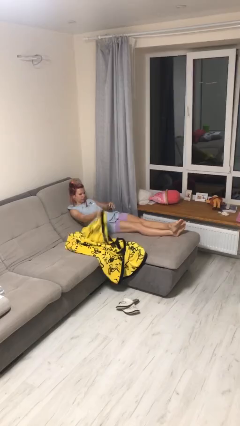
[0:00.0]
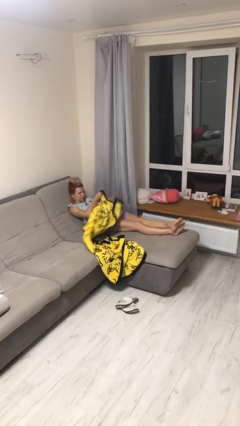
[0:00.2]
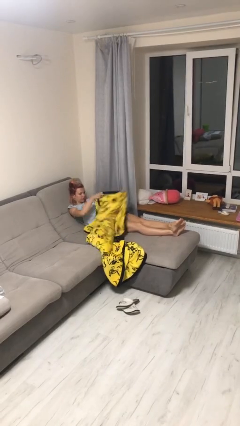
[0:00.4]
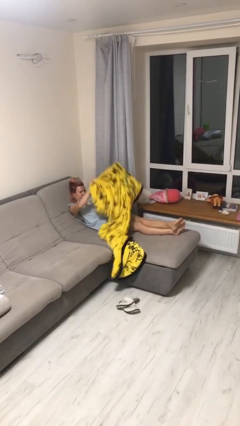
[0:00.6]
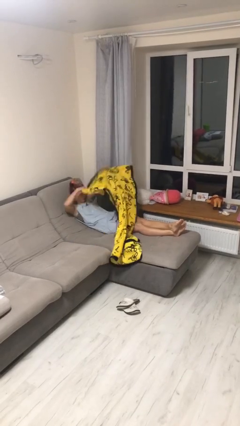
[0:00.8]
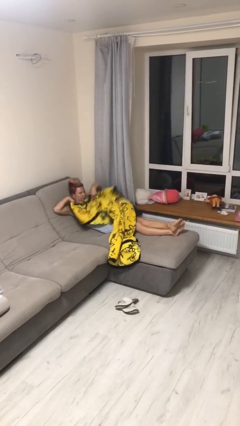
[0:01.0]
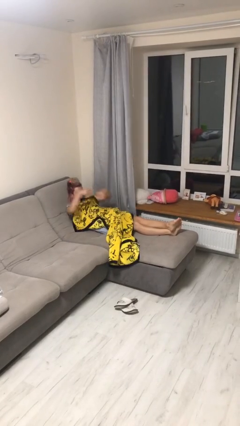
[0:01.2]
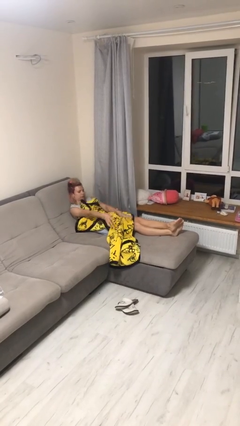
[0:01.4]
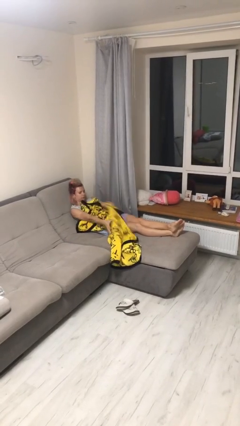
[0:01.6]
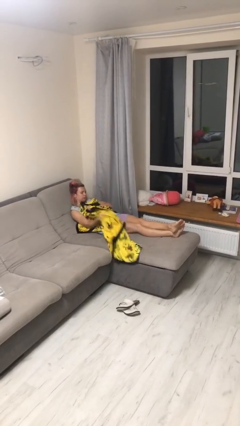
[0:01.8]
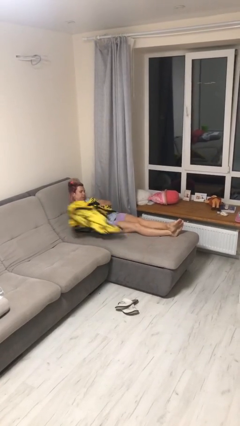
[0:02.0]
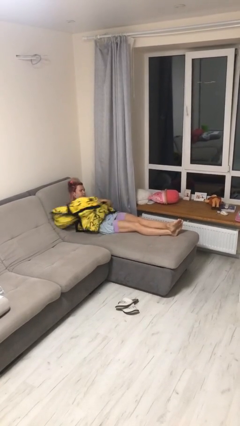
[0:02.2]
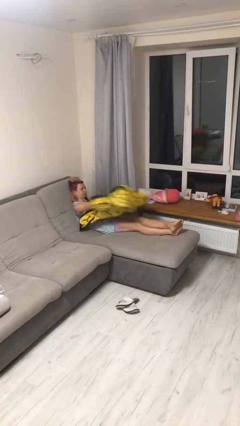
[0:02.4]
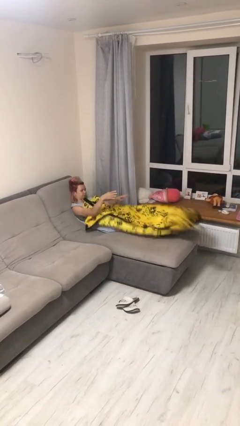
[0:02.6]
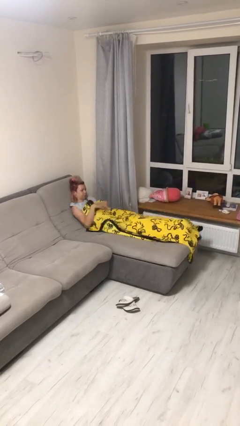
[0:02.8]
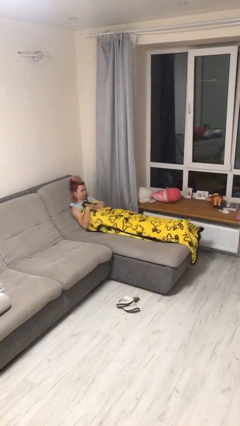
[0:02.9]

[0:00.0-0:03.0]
person covers with blanket

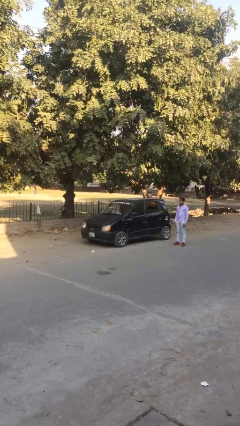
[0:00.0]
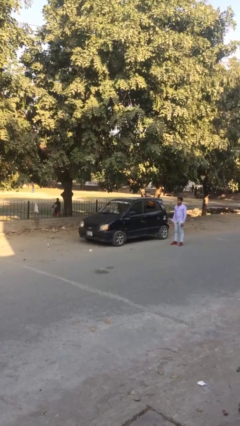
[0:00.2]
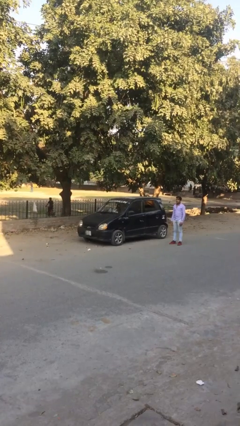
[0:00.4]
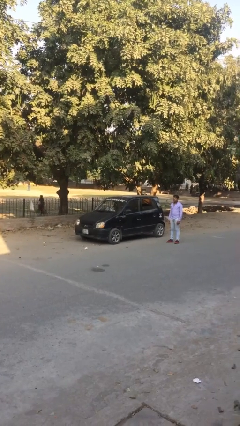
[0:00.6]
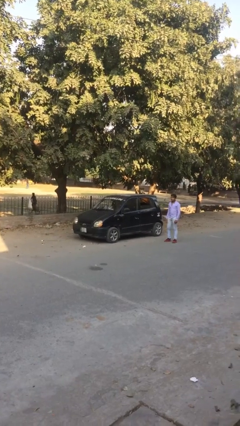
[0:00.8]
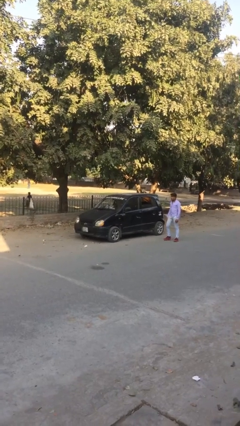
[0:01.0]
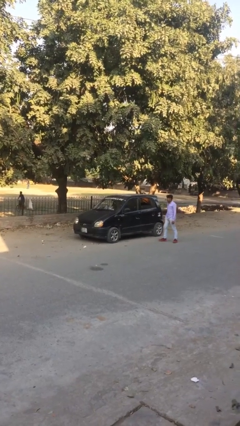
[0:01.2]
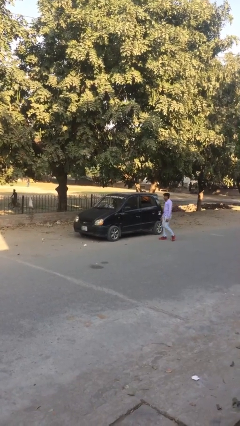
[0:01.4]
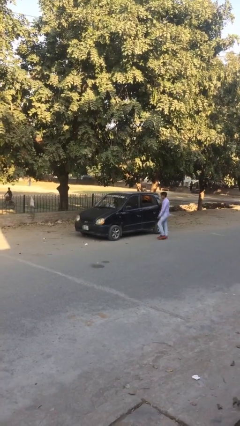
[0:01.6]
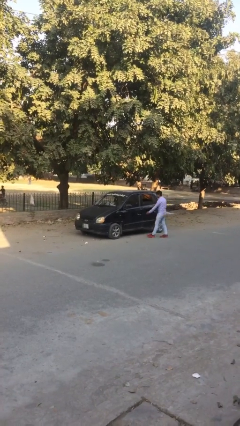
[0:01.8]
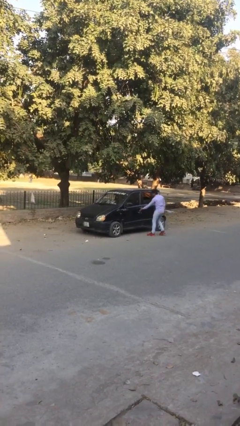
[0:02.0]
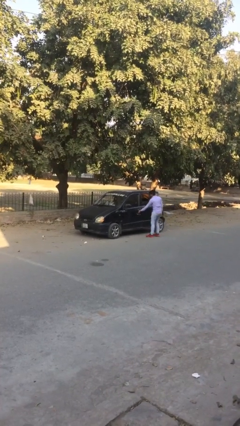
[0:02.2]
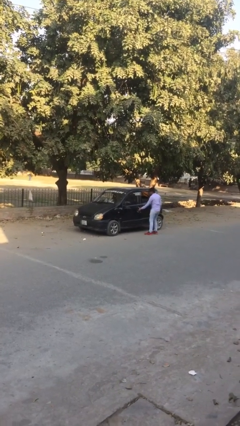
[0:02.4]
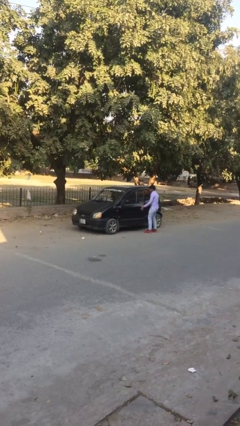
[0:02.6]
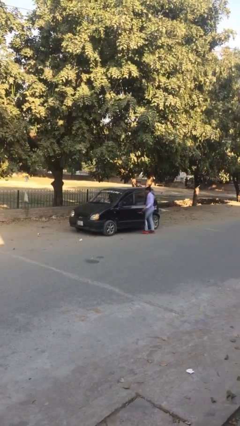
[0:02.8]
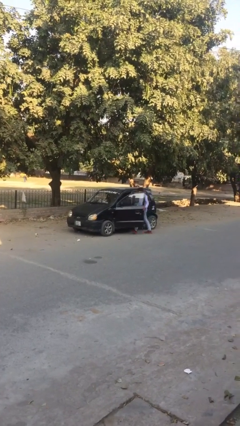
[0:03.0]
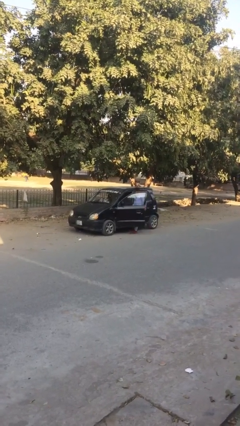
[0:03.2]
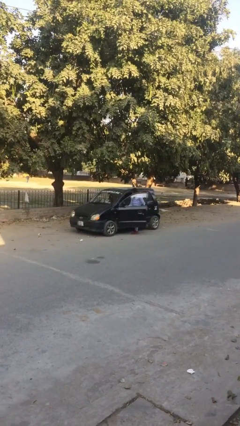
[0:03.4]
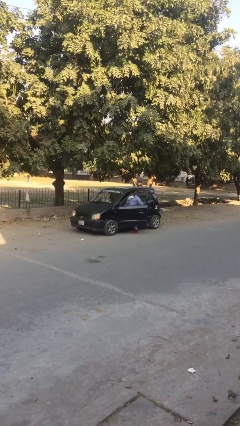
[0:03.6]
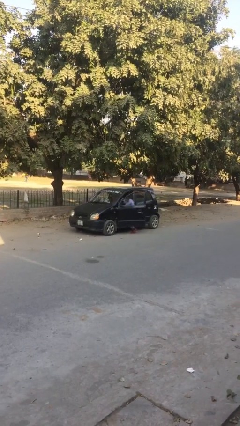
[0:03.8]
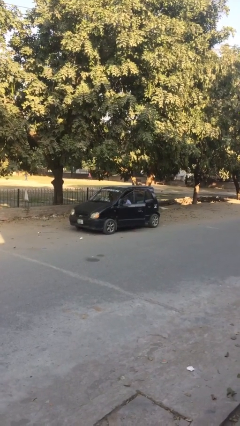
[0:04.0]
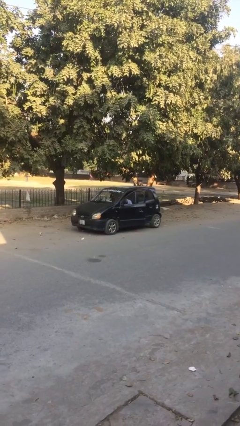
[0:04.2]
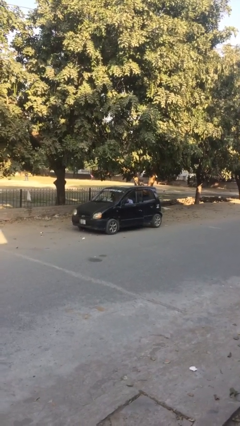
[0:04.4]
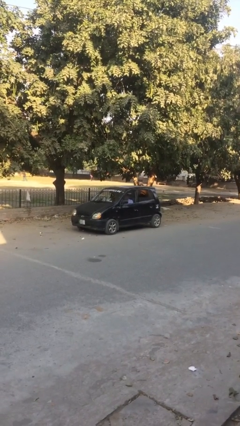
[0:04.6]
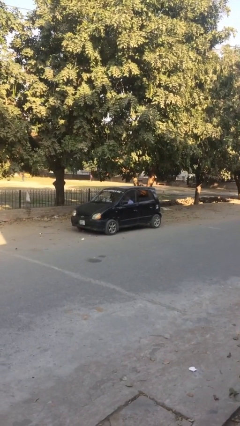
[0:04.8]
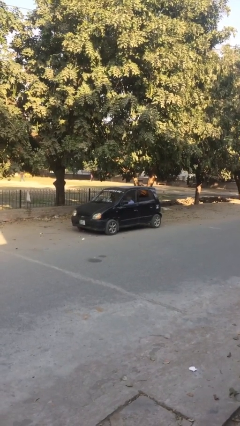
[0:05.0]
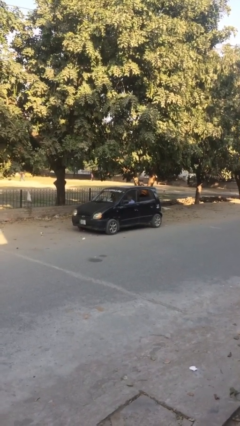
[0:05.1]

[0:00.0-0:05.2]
car picks up person

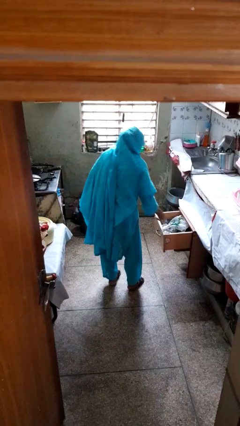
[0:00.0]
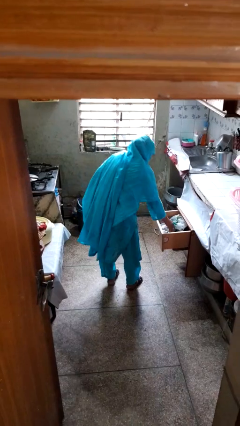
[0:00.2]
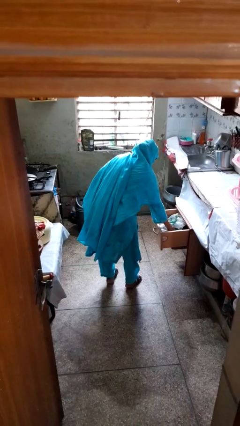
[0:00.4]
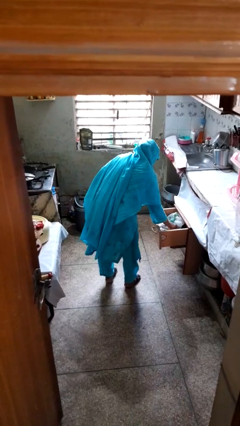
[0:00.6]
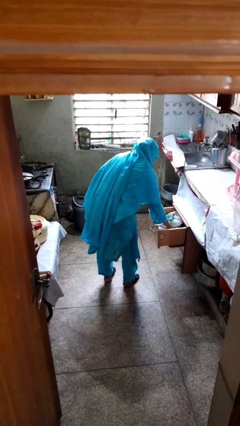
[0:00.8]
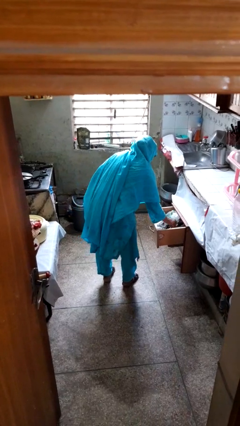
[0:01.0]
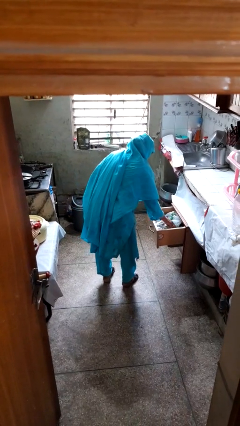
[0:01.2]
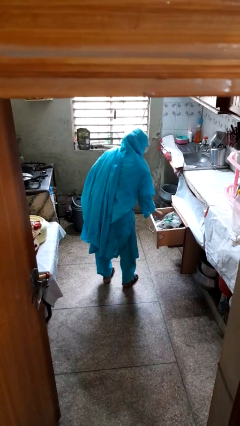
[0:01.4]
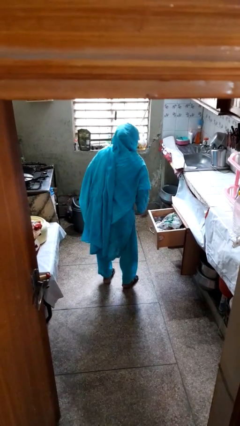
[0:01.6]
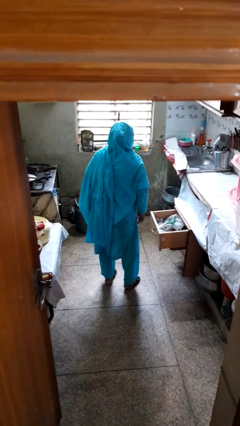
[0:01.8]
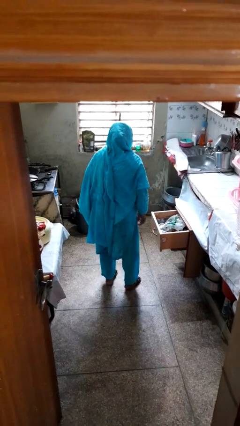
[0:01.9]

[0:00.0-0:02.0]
person searches in kitchen drawer

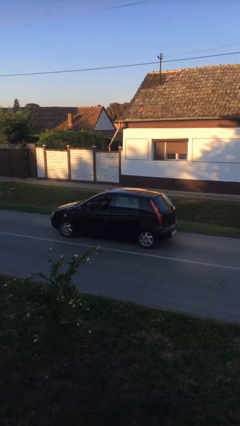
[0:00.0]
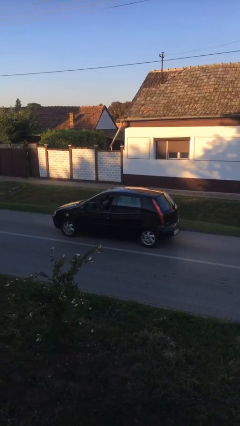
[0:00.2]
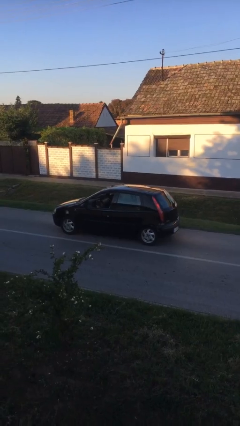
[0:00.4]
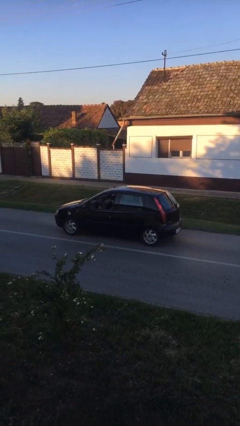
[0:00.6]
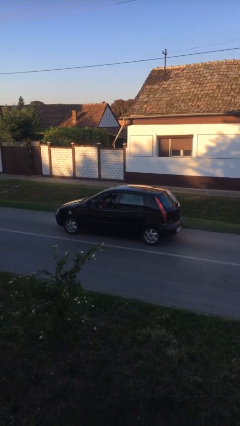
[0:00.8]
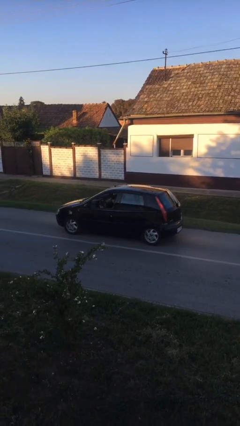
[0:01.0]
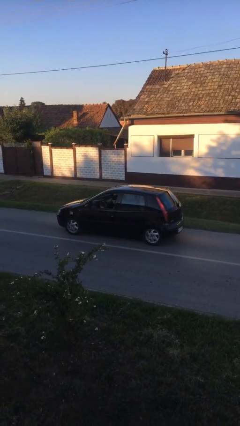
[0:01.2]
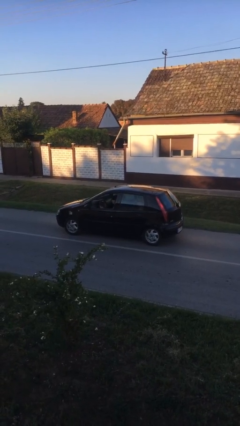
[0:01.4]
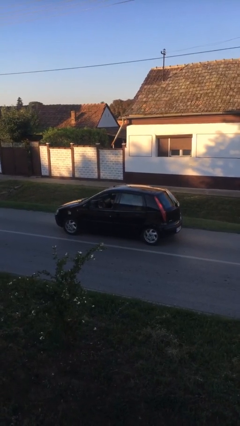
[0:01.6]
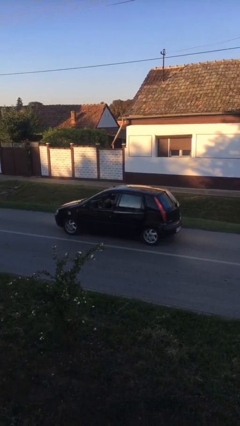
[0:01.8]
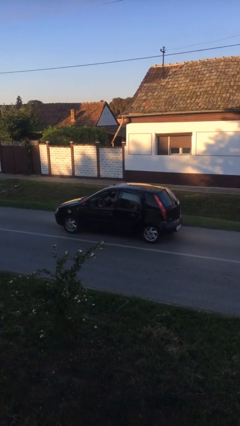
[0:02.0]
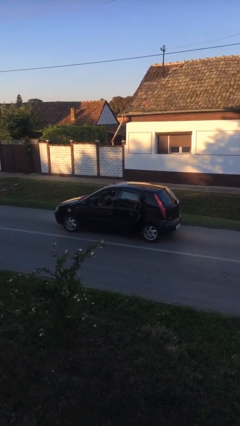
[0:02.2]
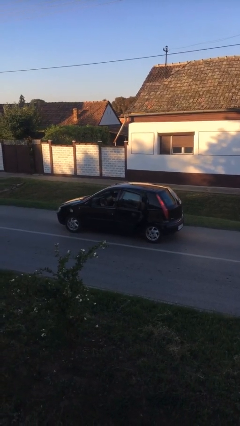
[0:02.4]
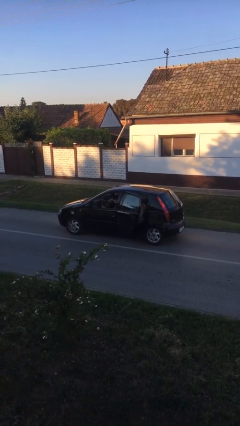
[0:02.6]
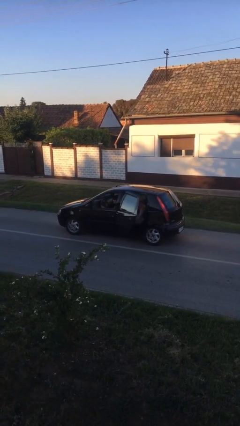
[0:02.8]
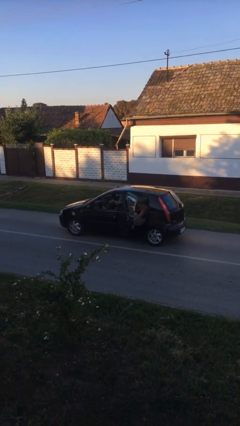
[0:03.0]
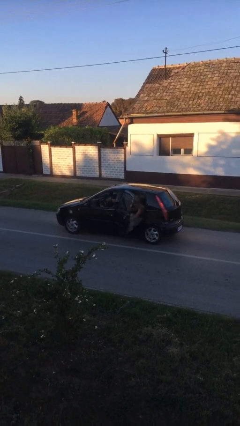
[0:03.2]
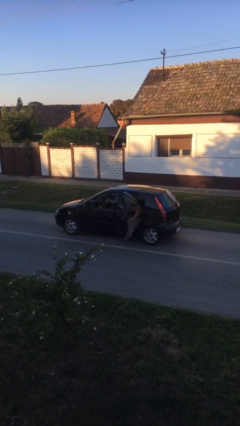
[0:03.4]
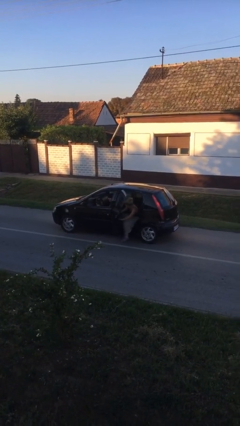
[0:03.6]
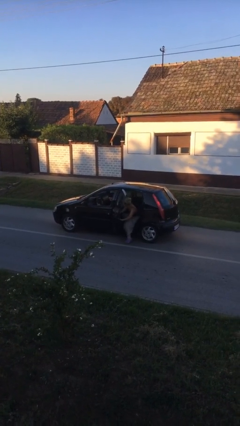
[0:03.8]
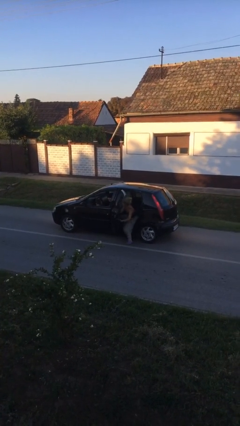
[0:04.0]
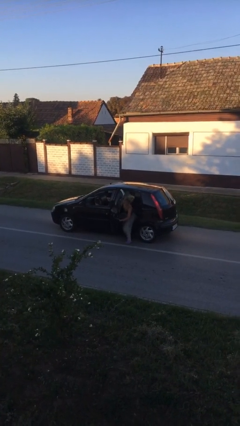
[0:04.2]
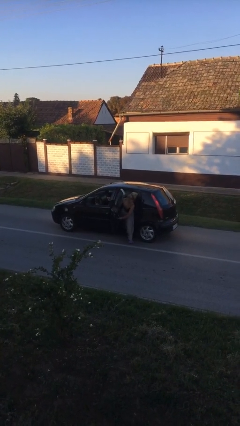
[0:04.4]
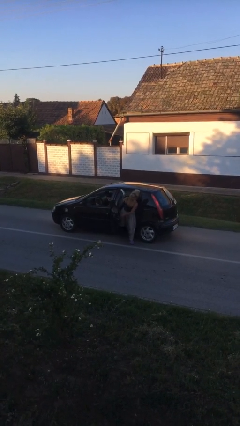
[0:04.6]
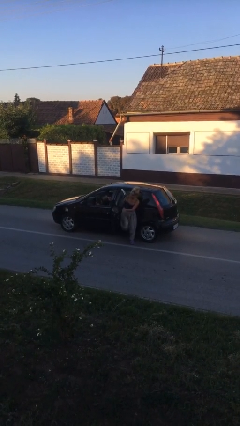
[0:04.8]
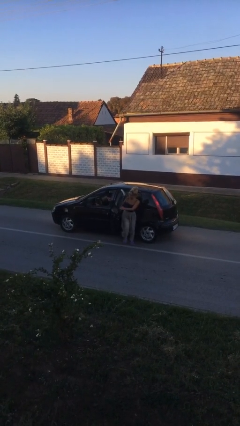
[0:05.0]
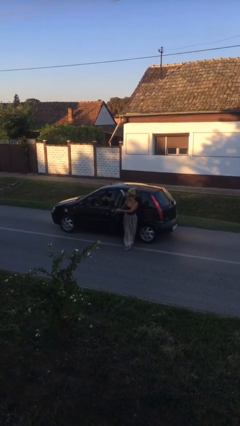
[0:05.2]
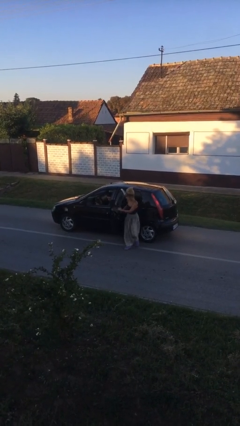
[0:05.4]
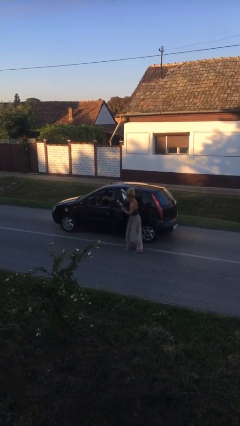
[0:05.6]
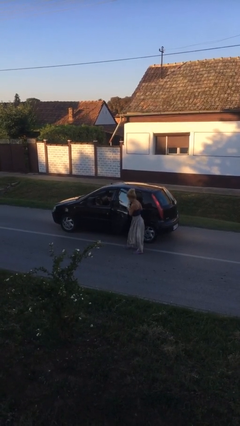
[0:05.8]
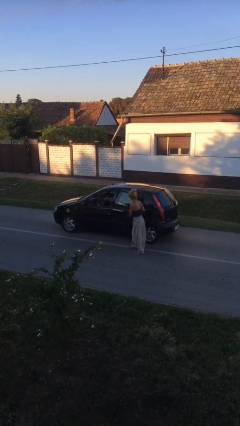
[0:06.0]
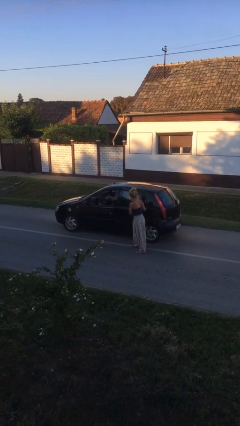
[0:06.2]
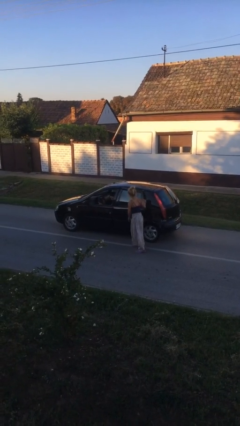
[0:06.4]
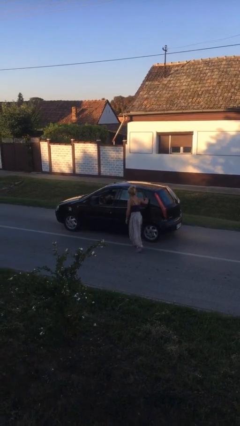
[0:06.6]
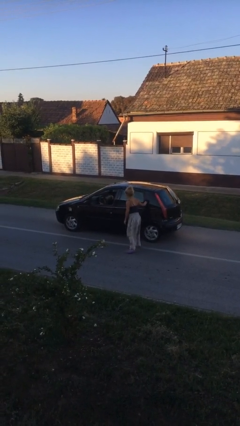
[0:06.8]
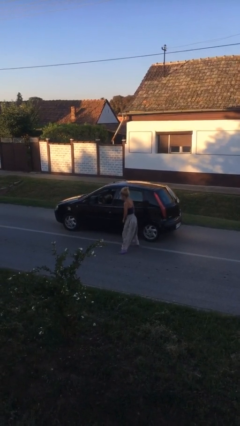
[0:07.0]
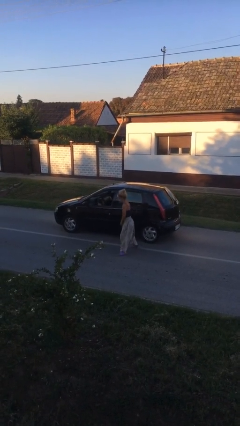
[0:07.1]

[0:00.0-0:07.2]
car drops off person

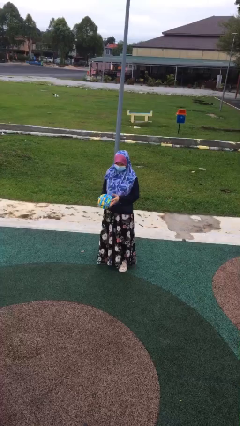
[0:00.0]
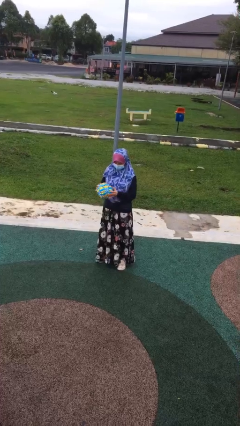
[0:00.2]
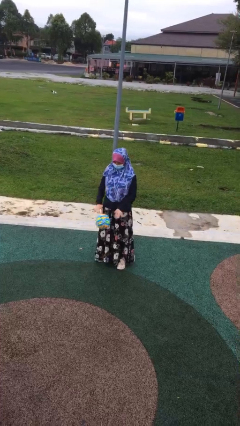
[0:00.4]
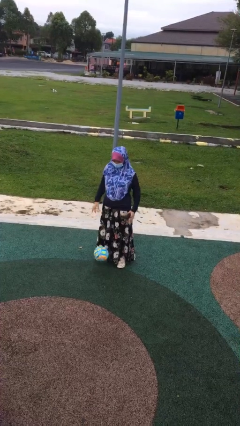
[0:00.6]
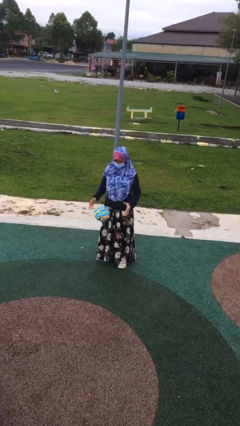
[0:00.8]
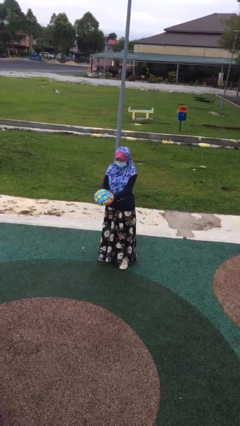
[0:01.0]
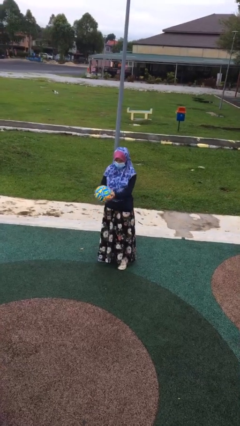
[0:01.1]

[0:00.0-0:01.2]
person bounces ball on floor
